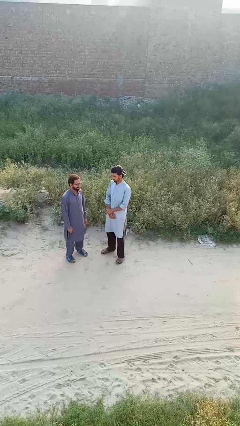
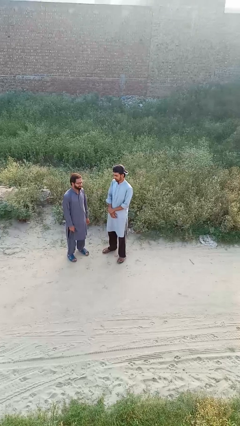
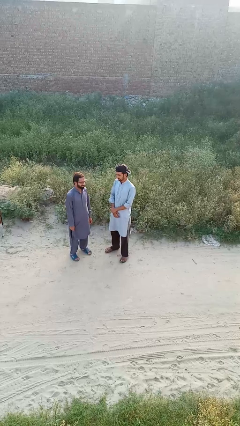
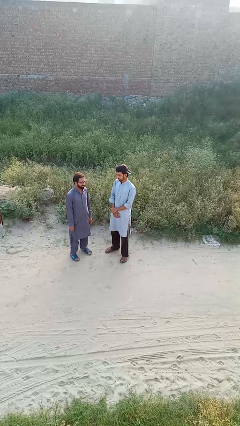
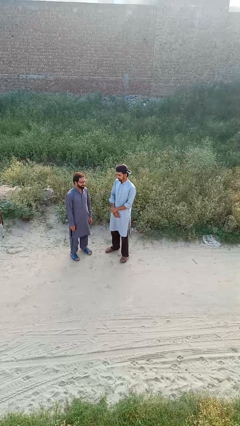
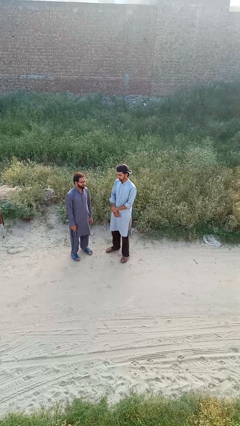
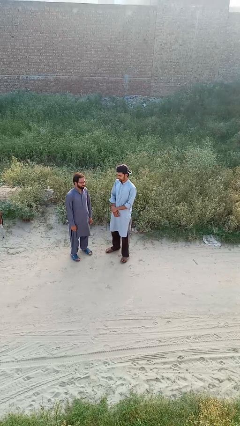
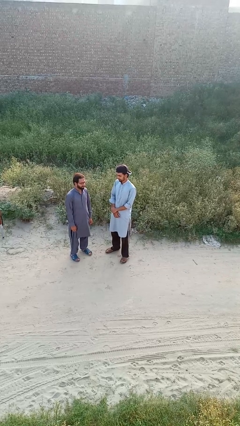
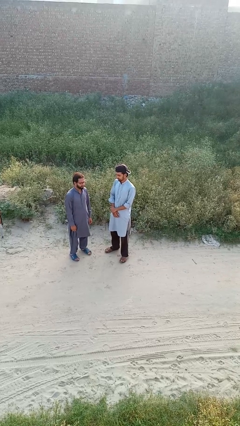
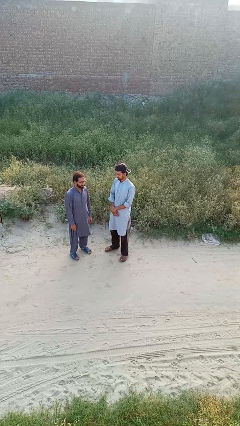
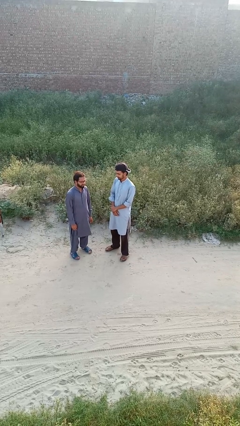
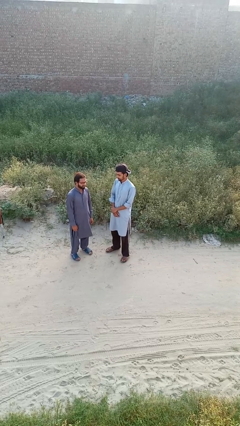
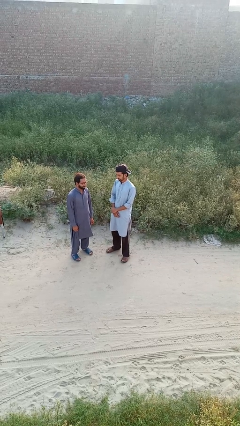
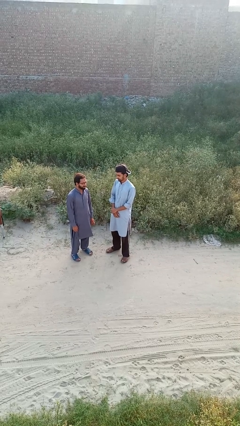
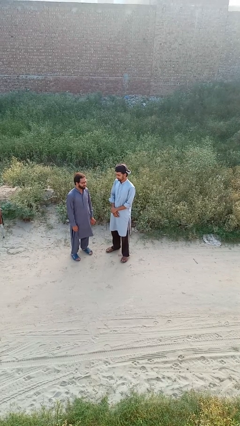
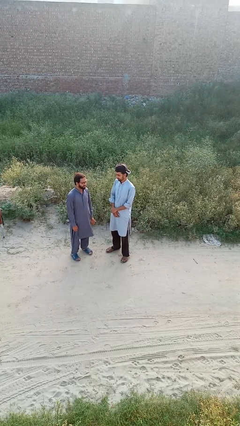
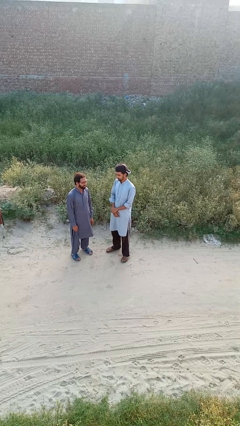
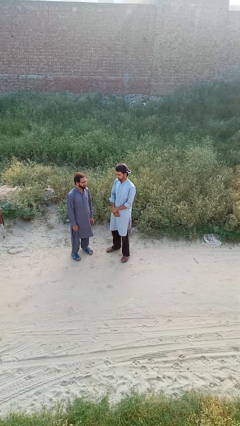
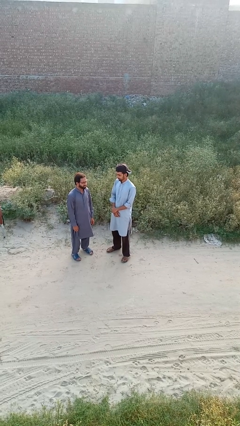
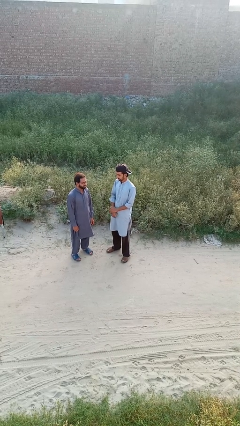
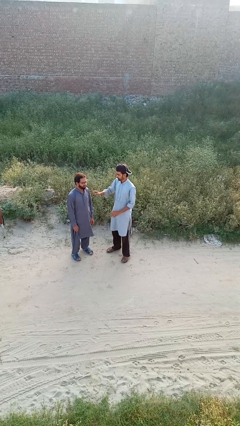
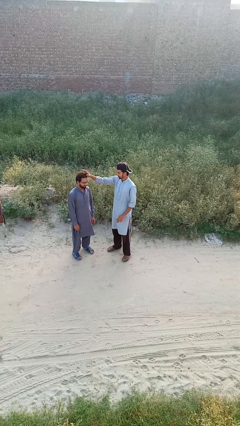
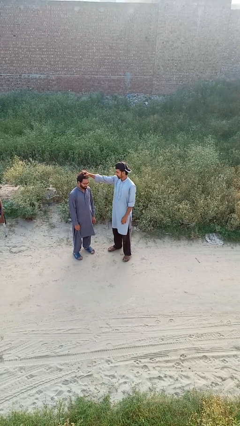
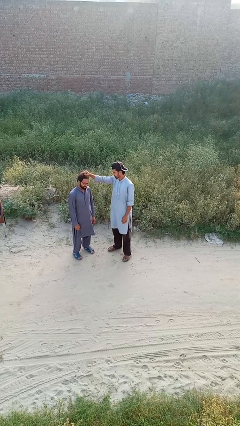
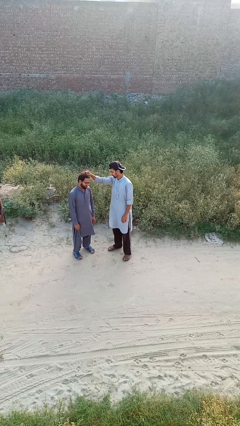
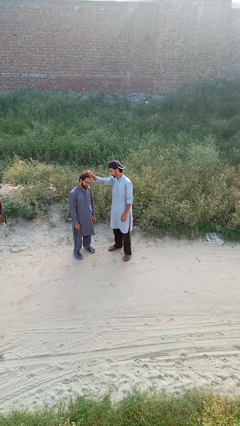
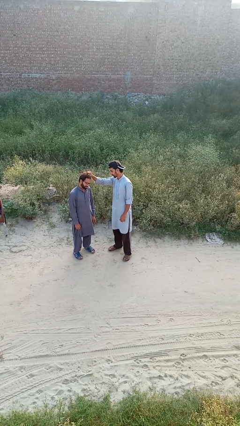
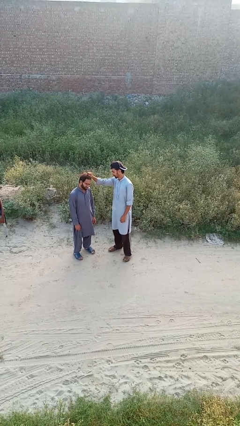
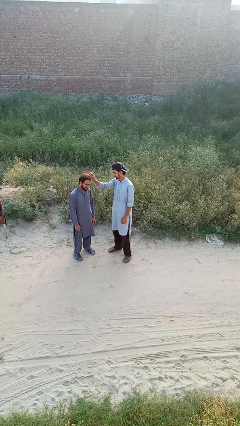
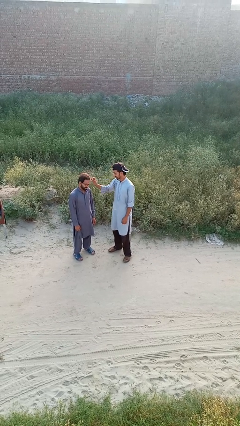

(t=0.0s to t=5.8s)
person grabs person by hair

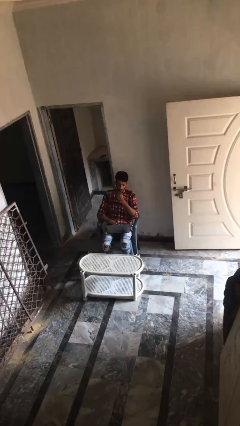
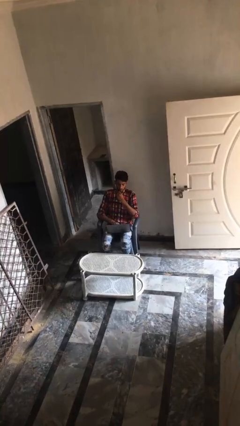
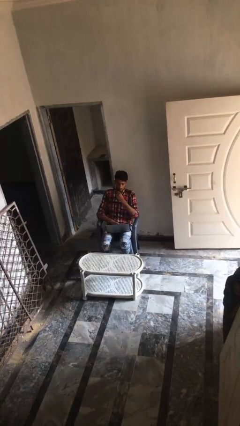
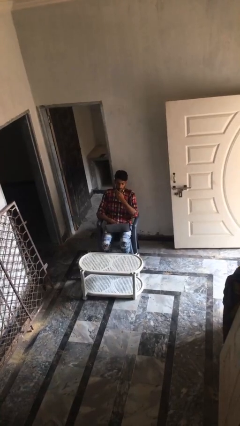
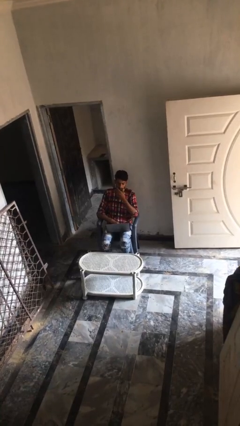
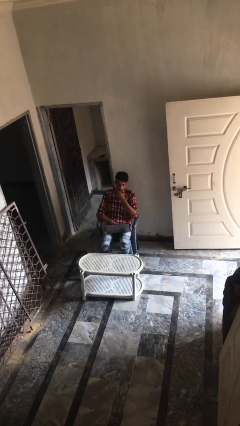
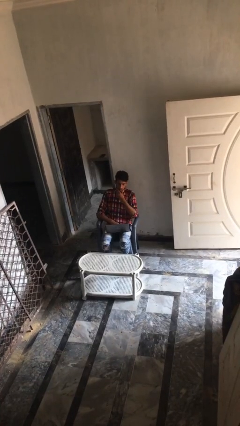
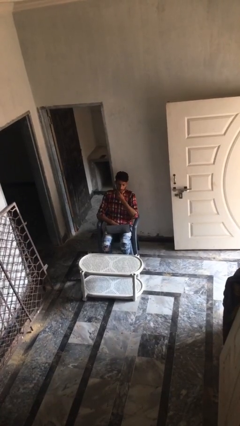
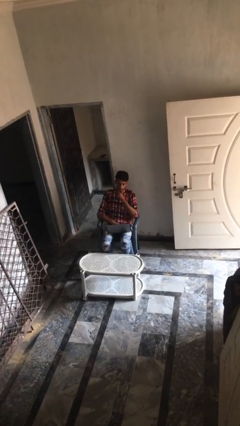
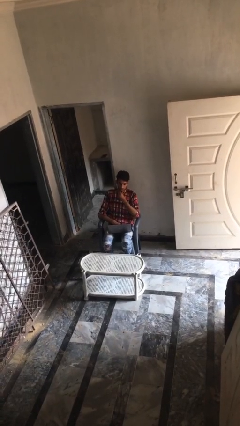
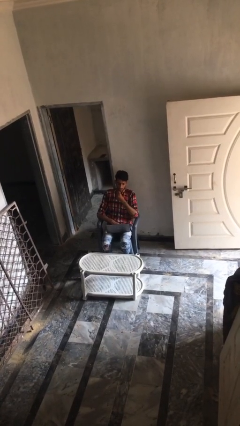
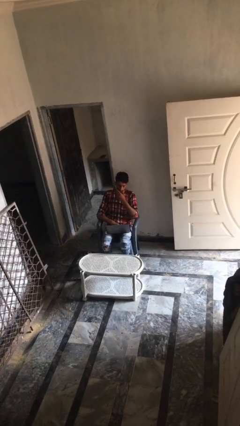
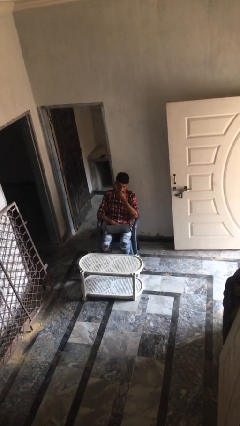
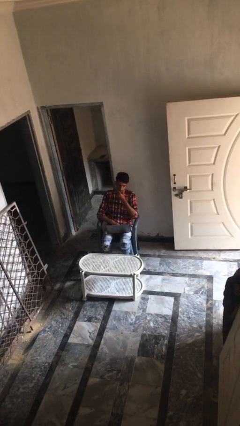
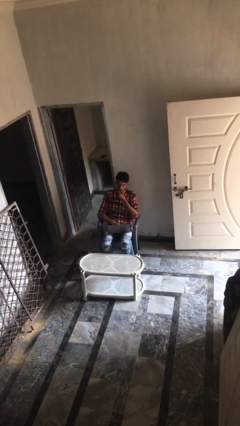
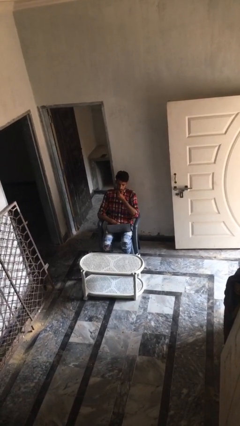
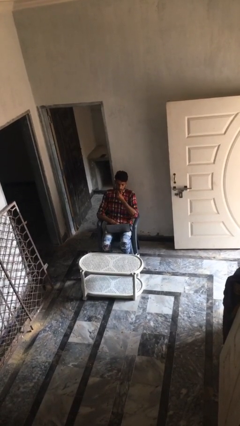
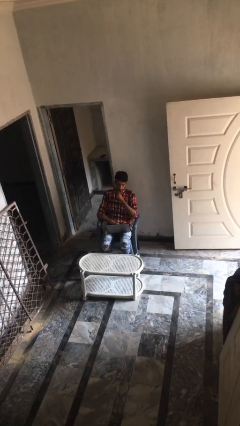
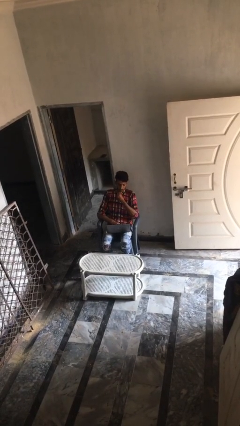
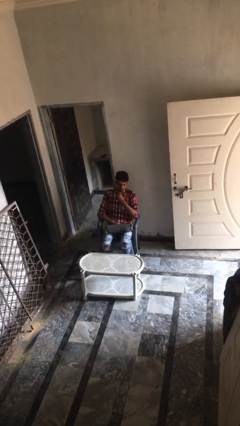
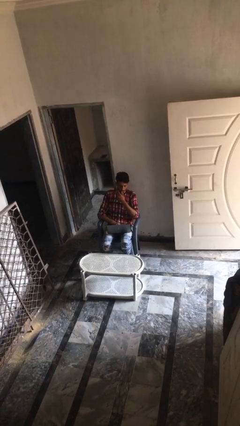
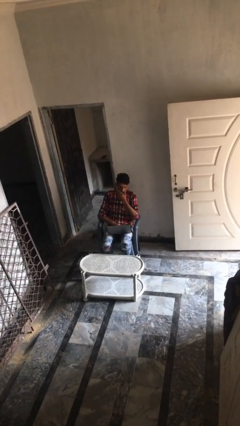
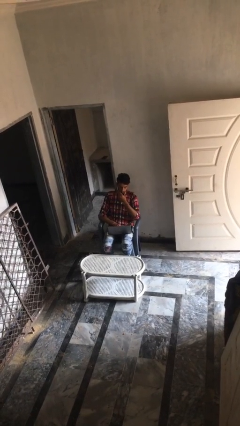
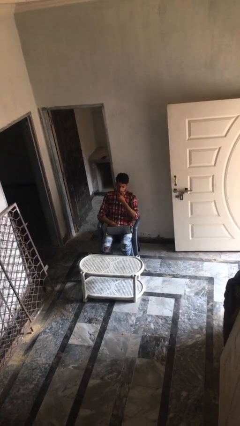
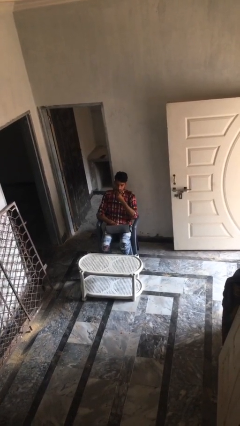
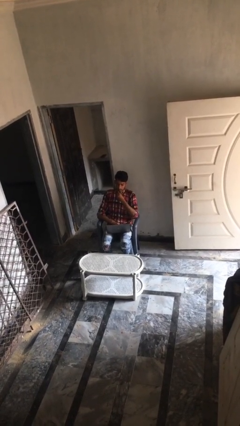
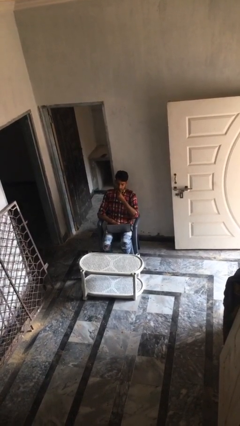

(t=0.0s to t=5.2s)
person interacts with laptop

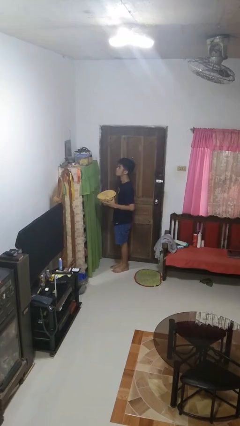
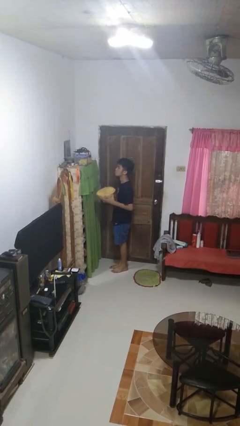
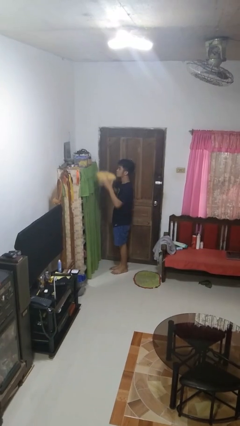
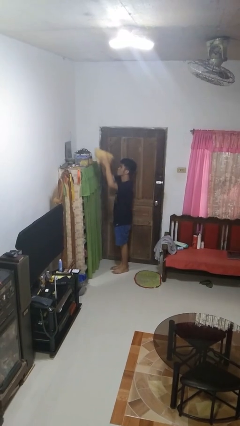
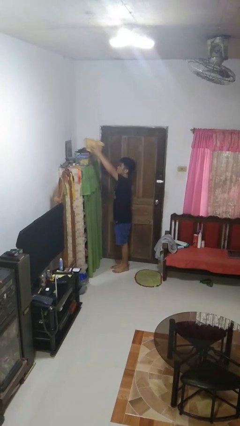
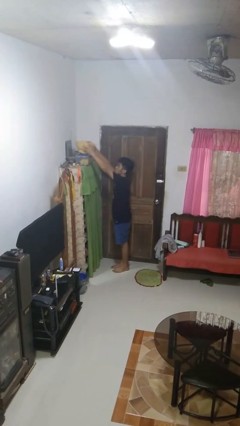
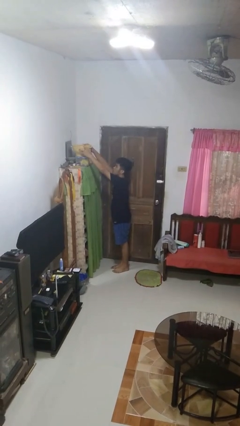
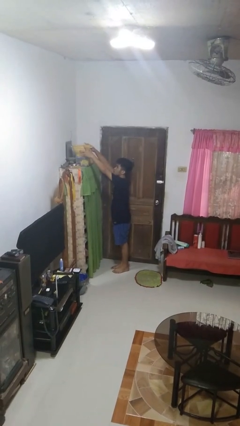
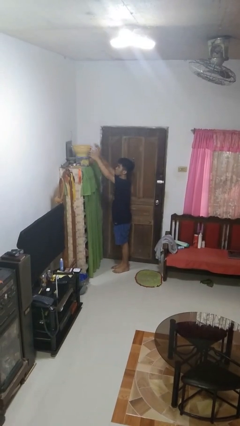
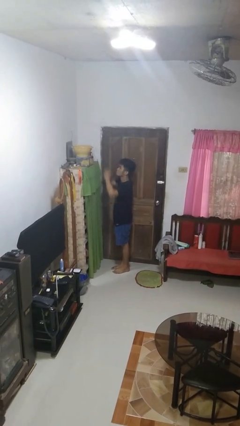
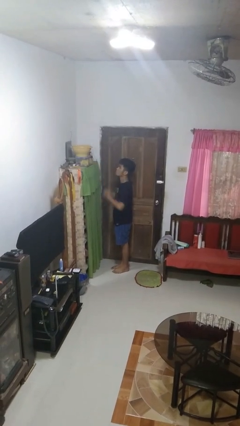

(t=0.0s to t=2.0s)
person puts down object on shelf

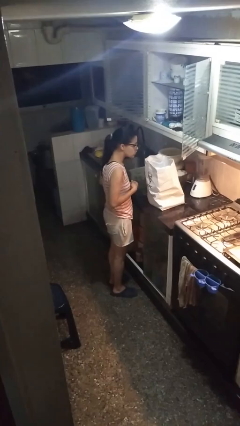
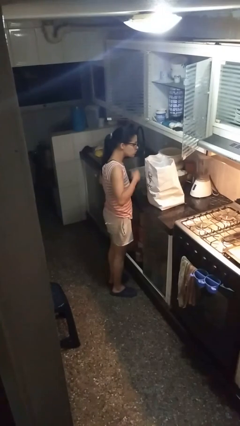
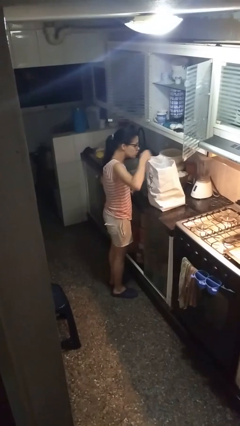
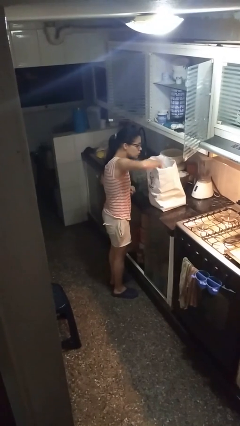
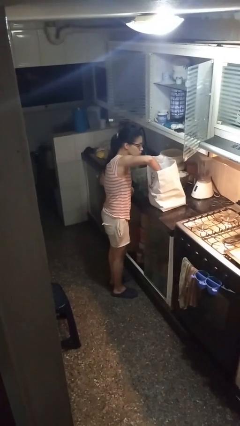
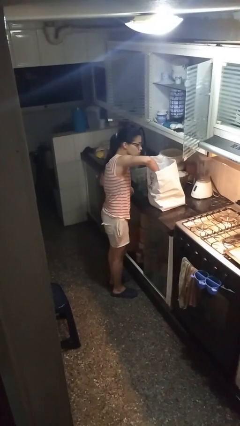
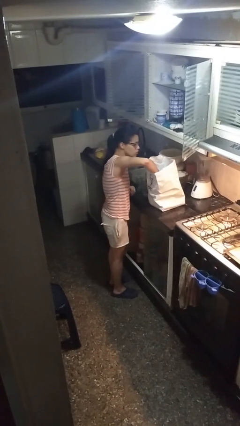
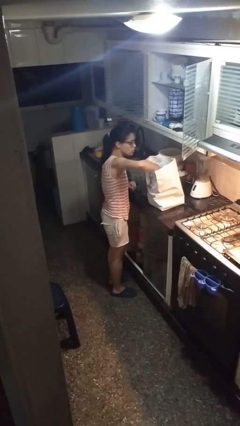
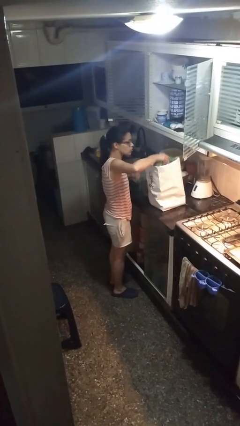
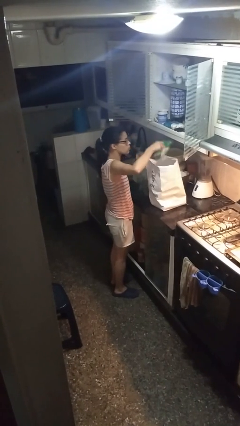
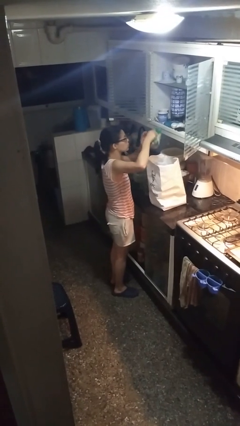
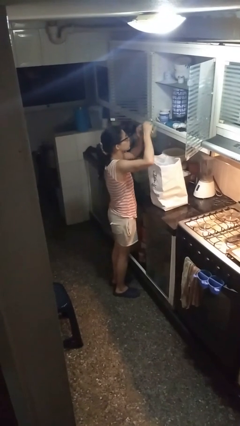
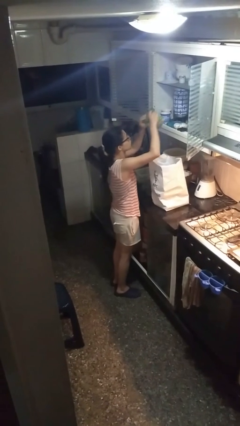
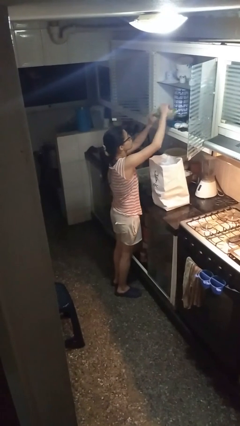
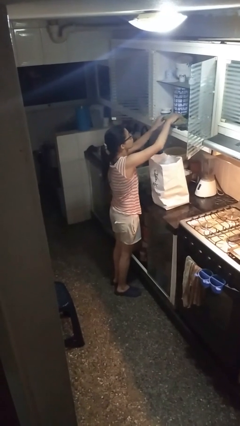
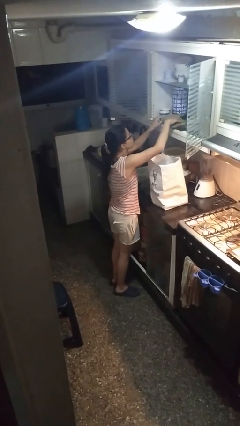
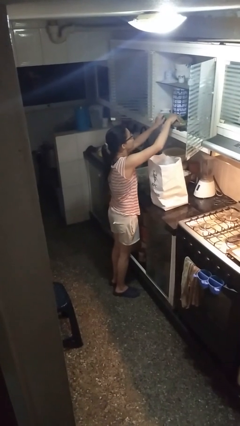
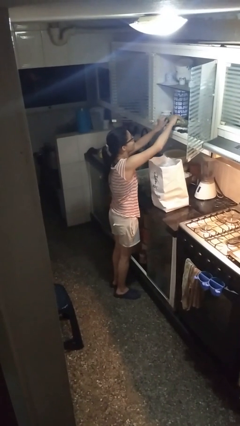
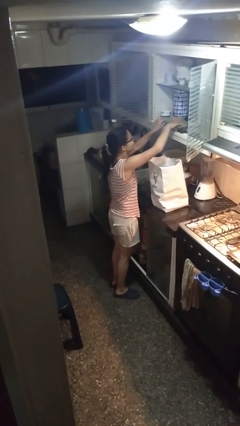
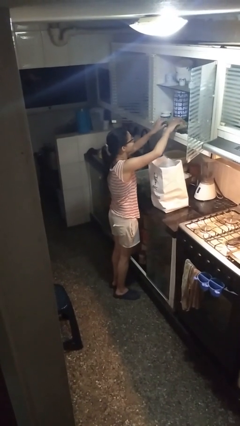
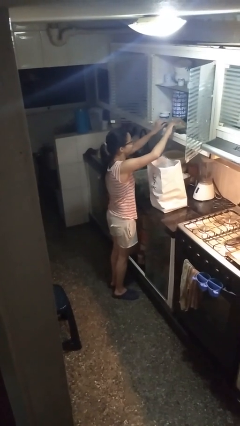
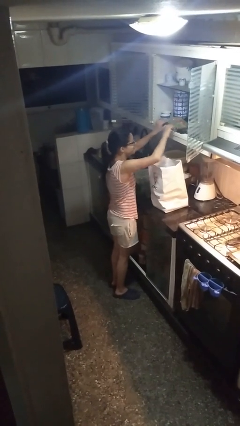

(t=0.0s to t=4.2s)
person loads groceries into cabinet
